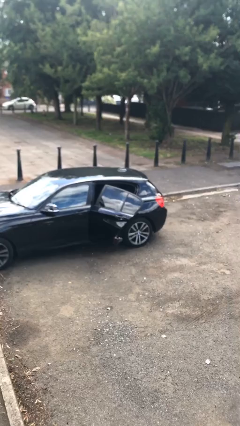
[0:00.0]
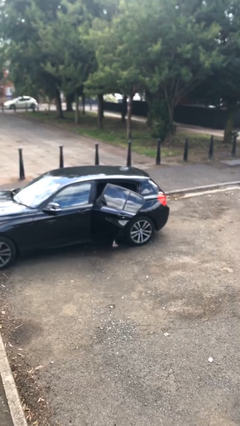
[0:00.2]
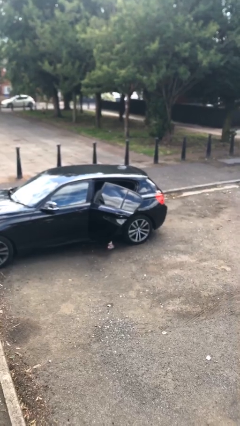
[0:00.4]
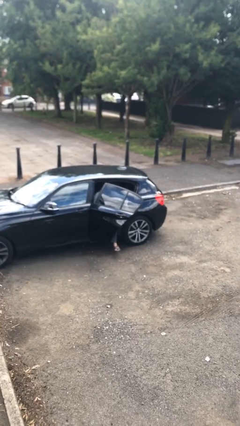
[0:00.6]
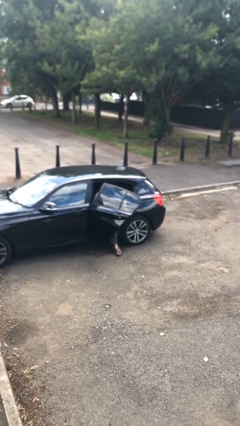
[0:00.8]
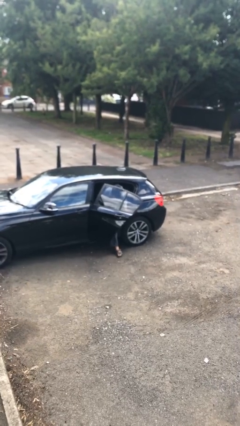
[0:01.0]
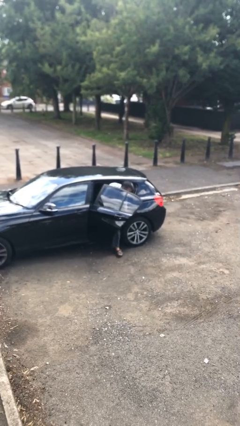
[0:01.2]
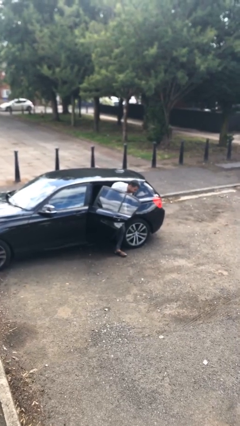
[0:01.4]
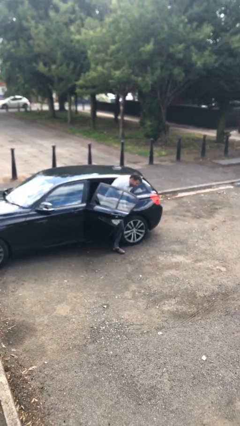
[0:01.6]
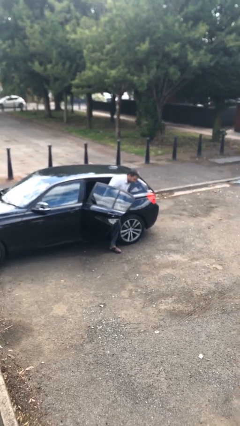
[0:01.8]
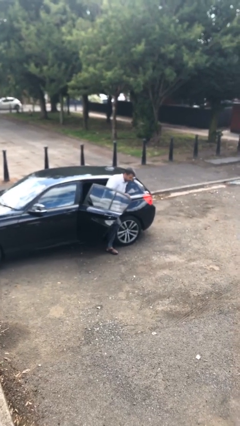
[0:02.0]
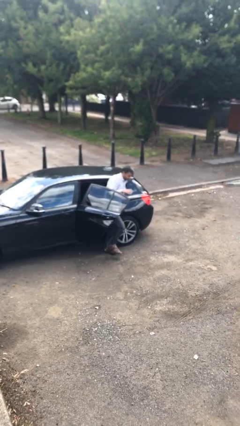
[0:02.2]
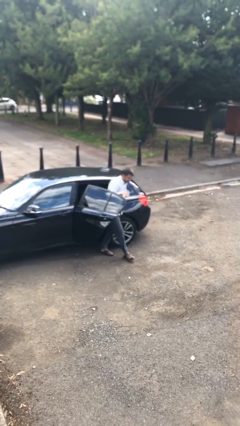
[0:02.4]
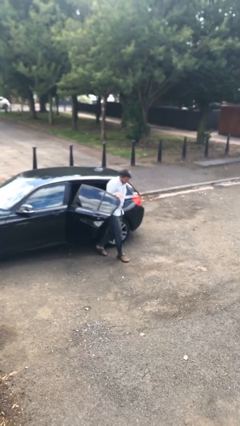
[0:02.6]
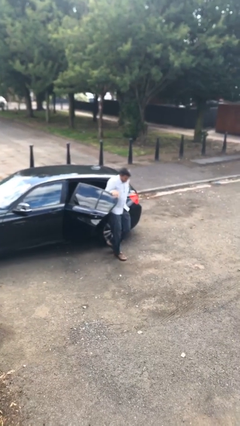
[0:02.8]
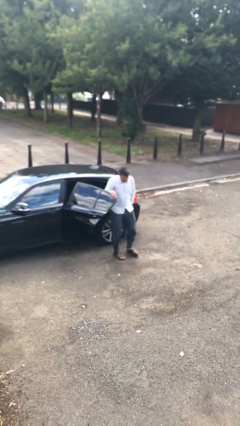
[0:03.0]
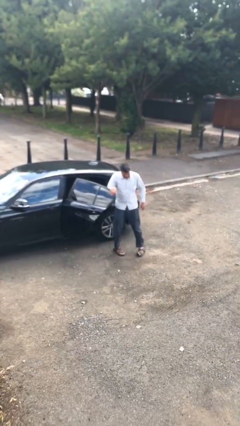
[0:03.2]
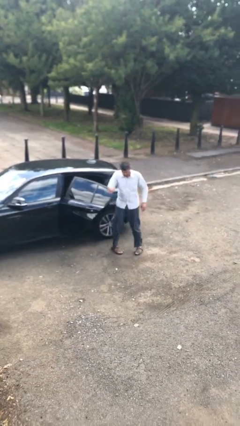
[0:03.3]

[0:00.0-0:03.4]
person exits car

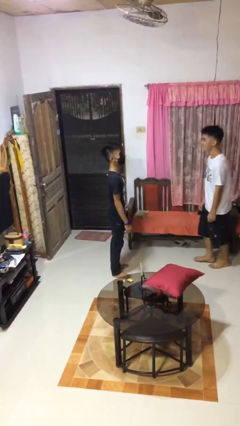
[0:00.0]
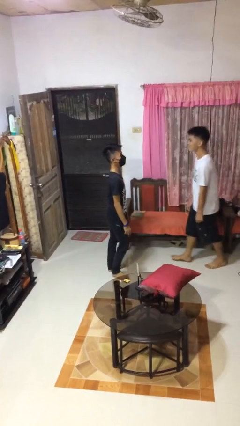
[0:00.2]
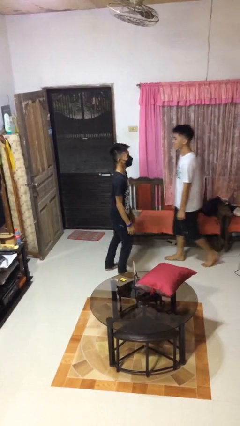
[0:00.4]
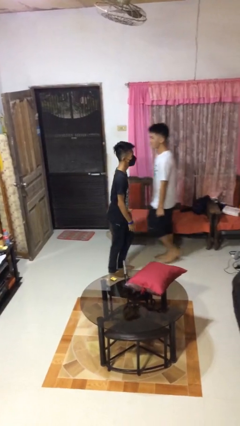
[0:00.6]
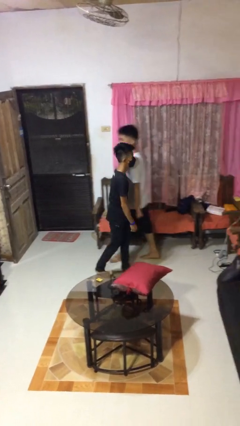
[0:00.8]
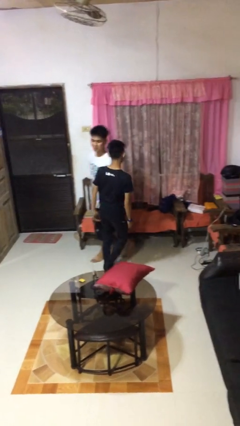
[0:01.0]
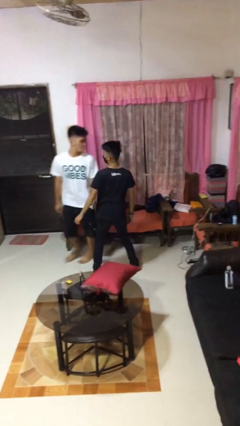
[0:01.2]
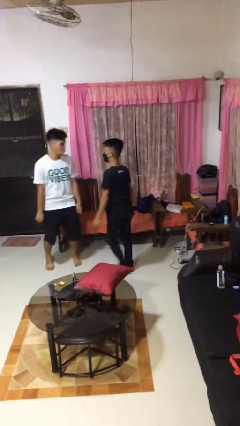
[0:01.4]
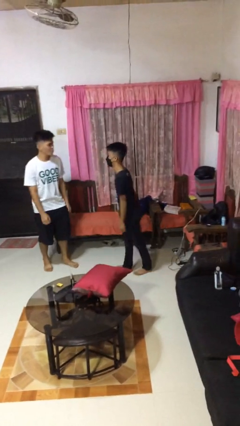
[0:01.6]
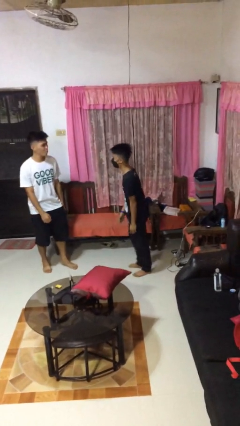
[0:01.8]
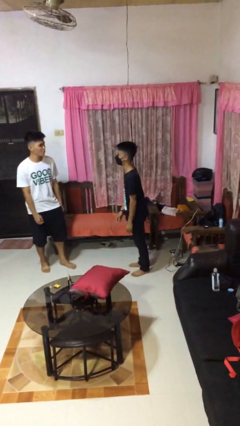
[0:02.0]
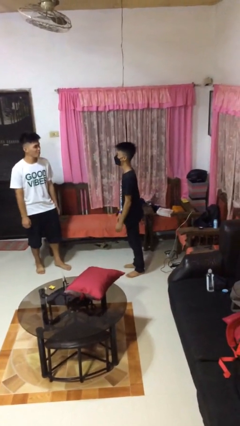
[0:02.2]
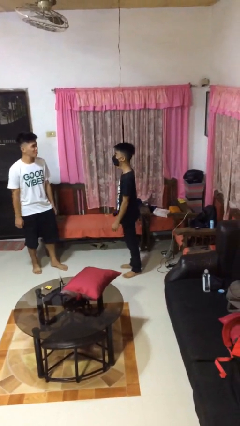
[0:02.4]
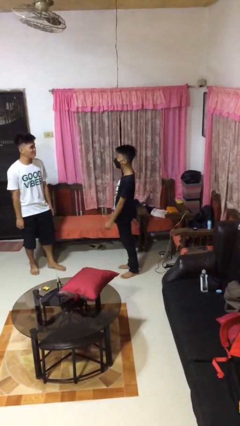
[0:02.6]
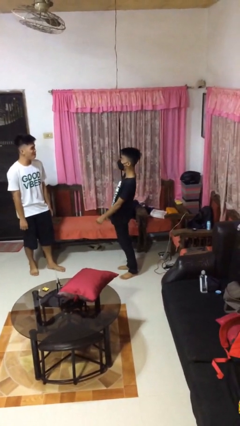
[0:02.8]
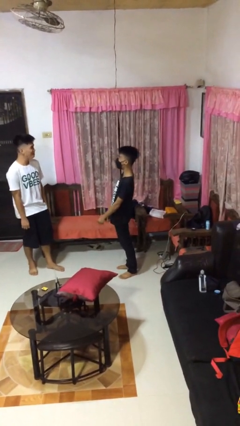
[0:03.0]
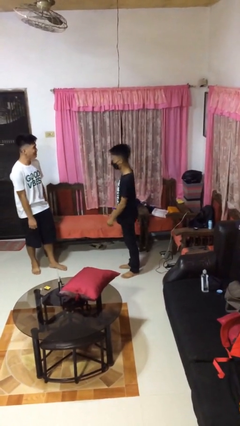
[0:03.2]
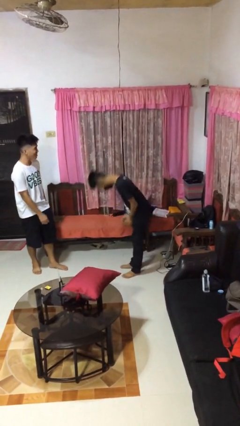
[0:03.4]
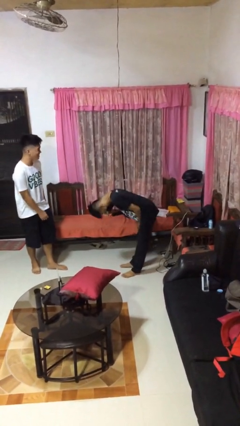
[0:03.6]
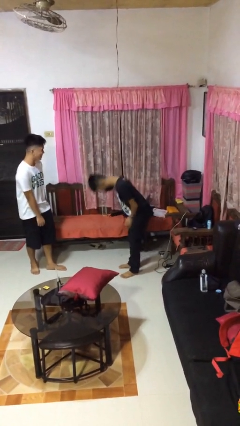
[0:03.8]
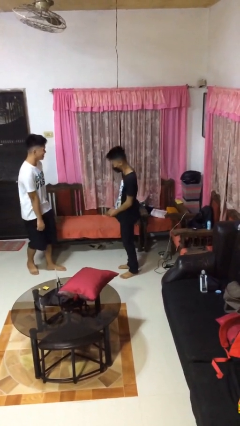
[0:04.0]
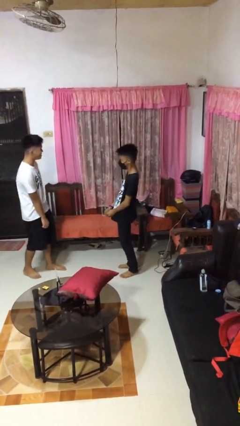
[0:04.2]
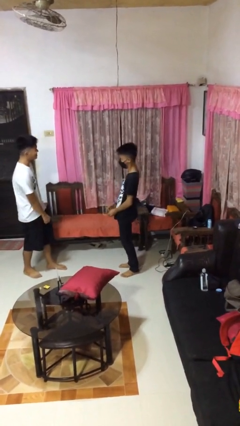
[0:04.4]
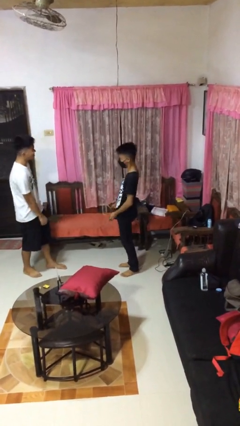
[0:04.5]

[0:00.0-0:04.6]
person bumps into person

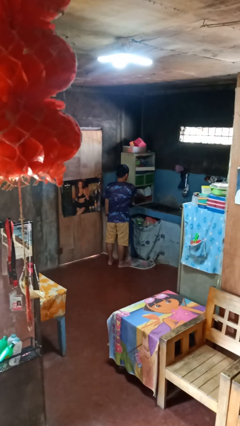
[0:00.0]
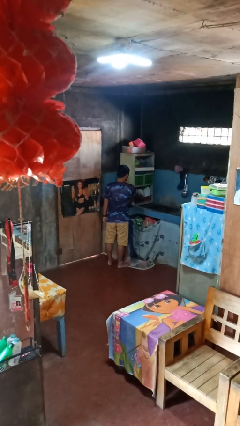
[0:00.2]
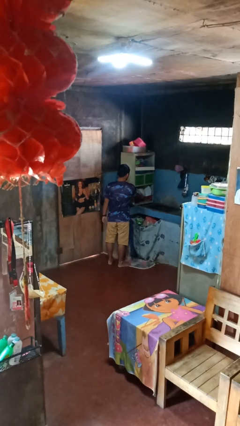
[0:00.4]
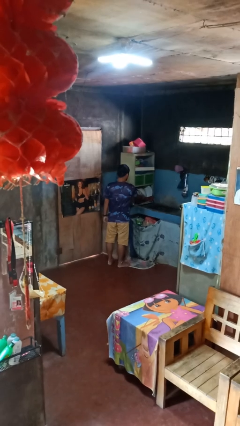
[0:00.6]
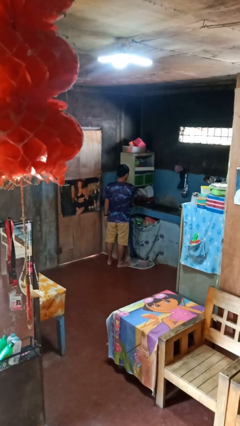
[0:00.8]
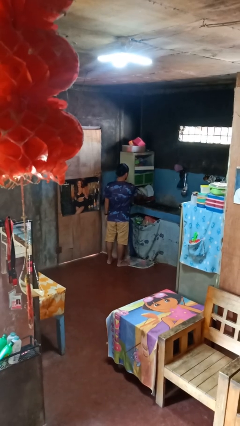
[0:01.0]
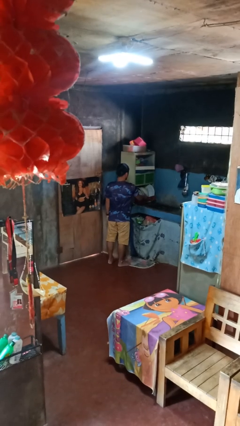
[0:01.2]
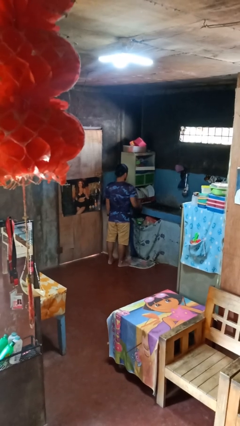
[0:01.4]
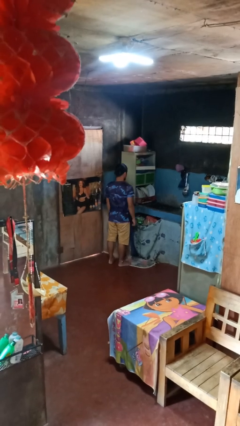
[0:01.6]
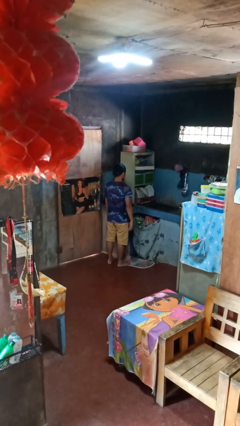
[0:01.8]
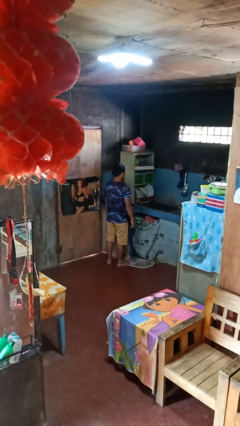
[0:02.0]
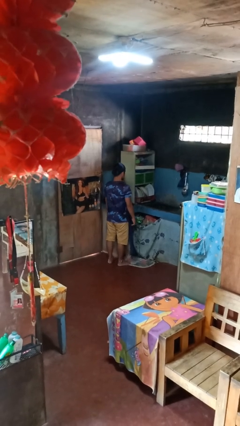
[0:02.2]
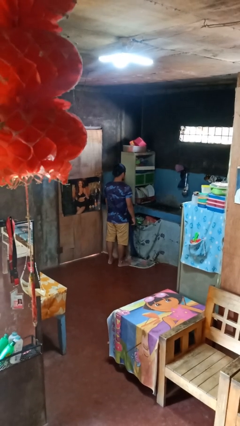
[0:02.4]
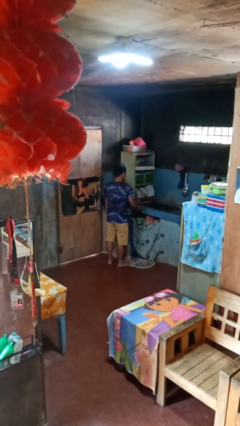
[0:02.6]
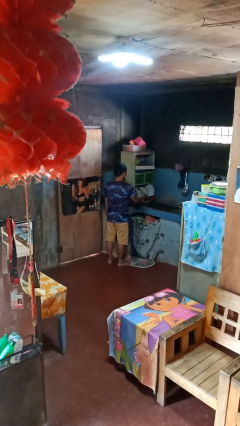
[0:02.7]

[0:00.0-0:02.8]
person opens dishwasher

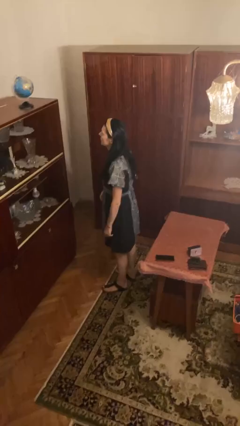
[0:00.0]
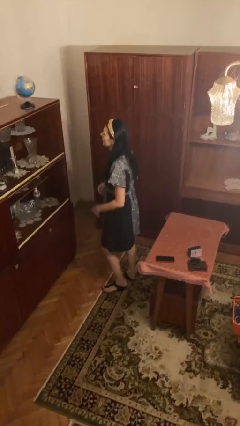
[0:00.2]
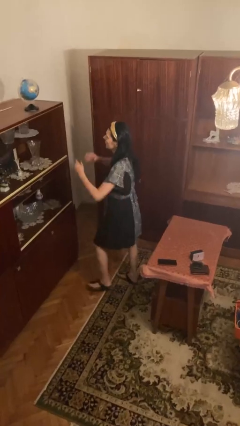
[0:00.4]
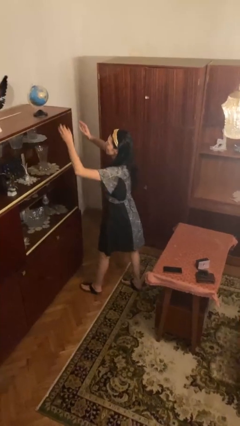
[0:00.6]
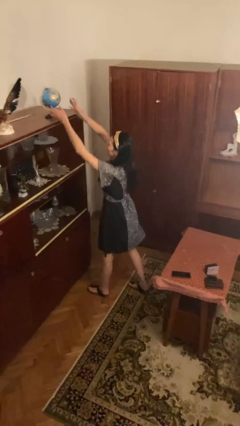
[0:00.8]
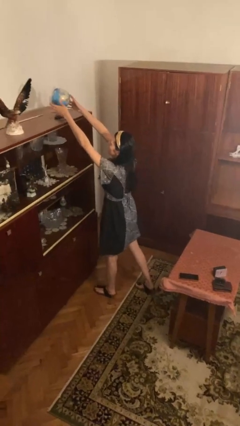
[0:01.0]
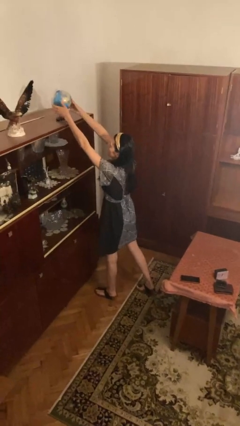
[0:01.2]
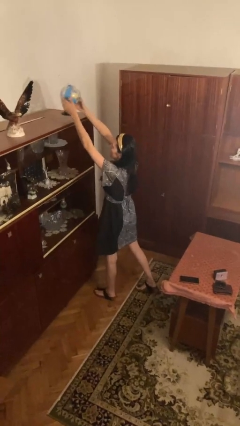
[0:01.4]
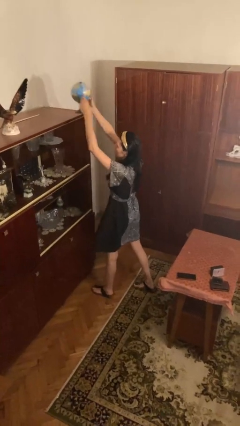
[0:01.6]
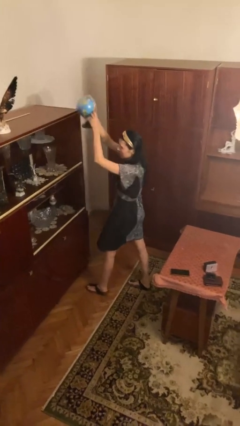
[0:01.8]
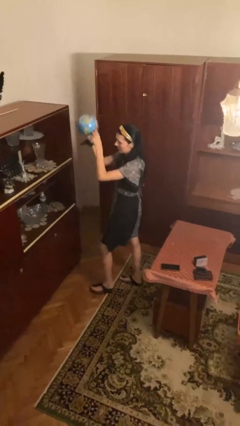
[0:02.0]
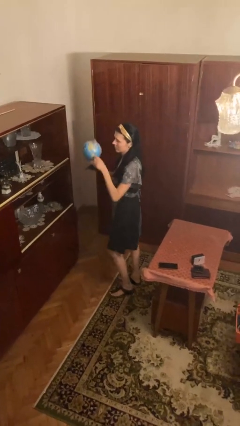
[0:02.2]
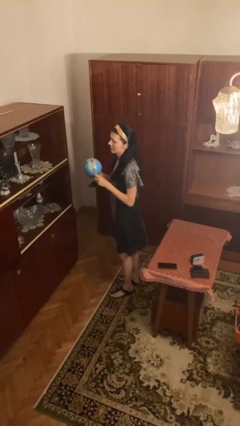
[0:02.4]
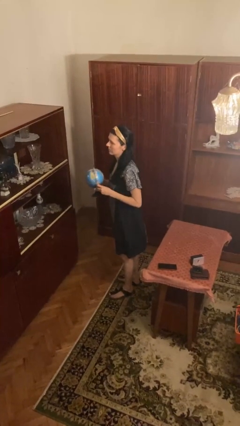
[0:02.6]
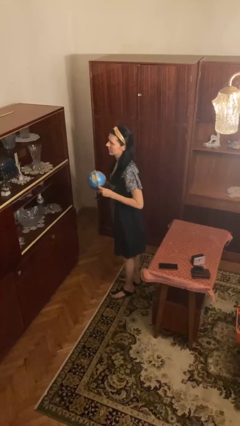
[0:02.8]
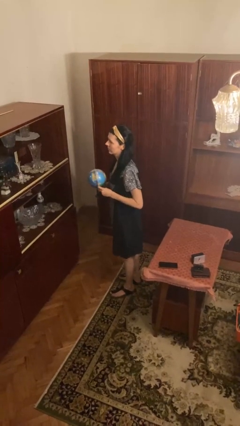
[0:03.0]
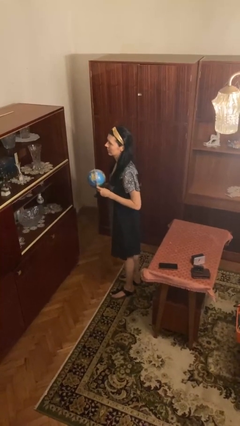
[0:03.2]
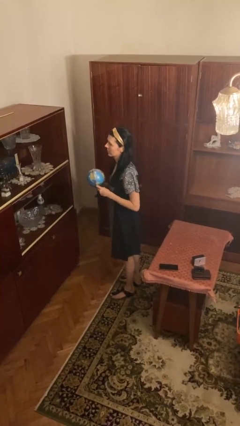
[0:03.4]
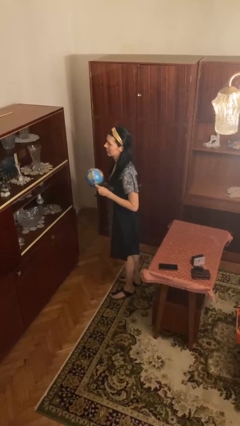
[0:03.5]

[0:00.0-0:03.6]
person picks up object from countertop

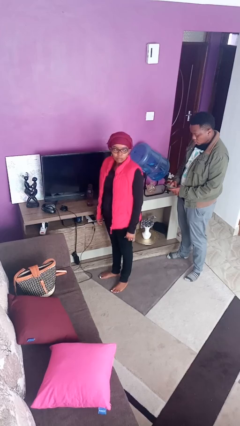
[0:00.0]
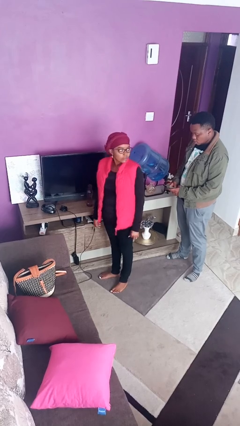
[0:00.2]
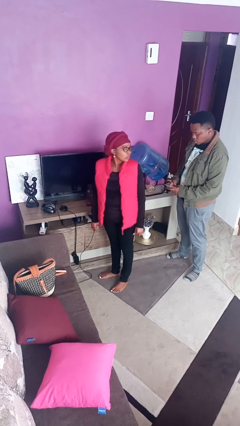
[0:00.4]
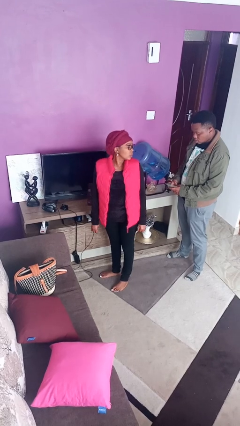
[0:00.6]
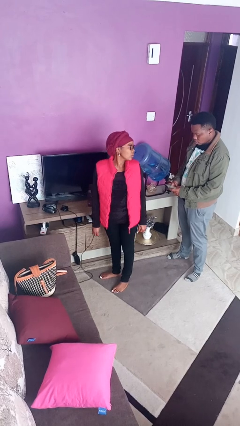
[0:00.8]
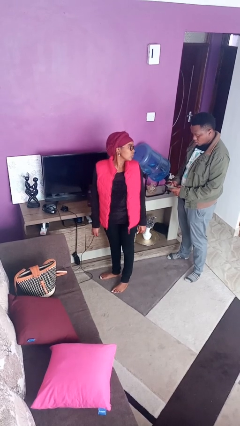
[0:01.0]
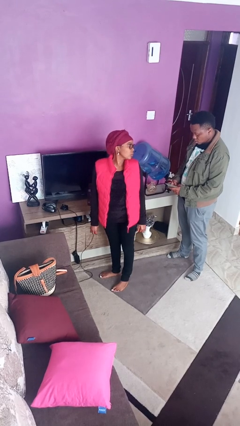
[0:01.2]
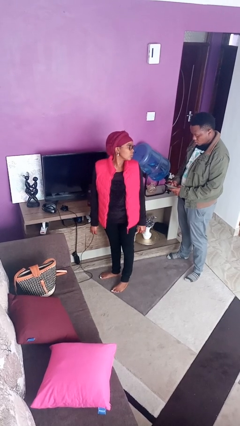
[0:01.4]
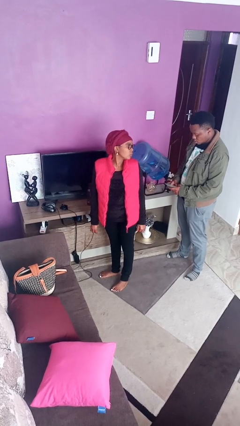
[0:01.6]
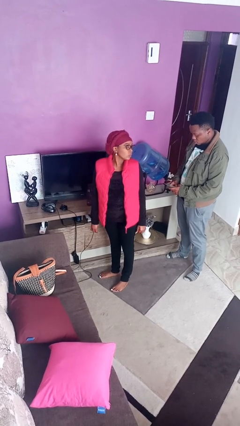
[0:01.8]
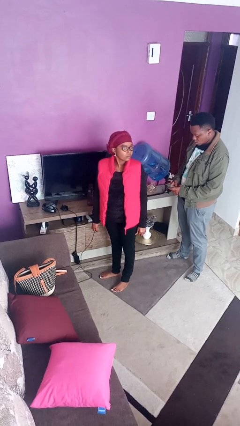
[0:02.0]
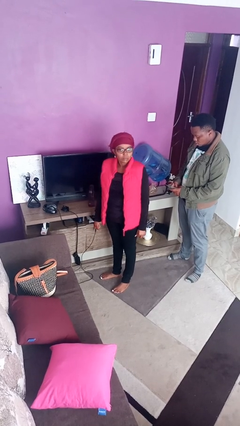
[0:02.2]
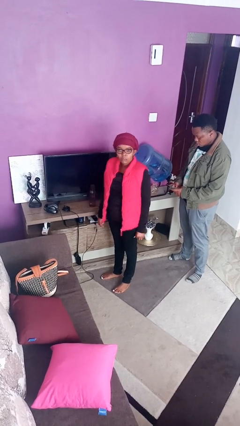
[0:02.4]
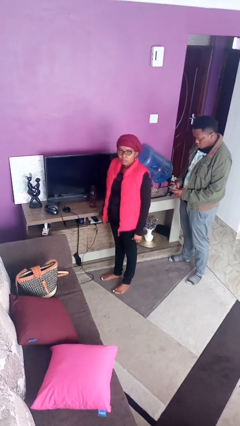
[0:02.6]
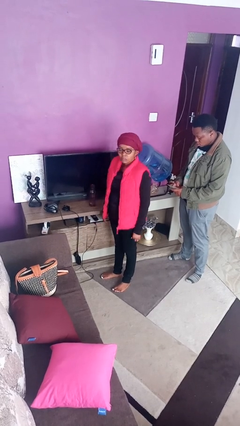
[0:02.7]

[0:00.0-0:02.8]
person looks over shoulder

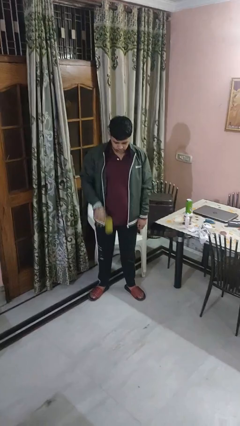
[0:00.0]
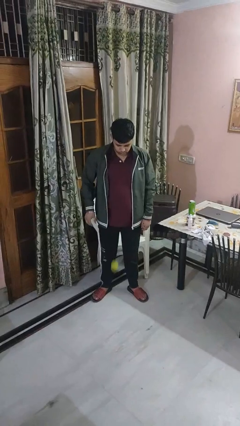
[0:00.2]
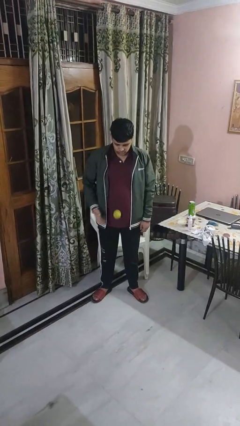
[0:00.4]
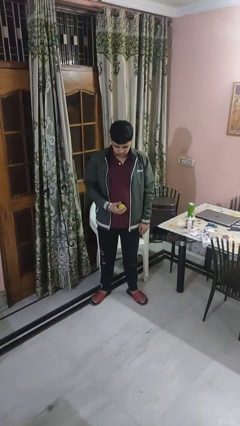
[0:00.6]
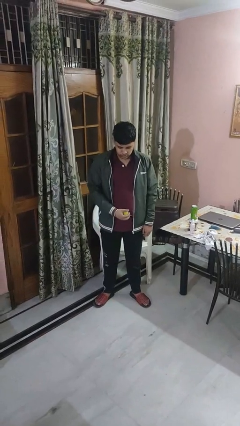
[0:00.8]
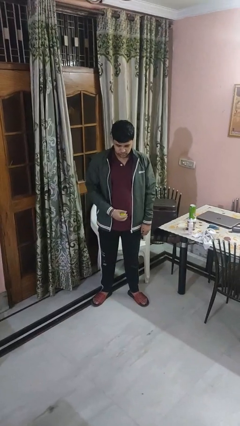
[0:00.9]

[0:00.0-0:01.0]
person bounces ball on floor
